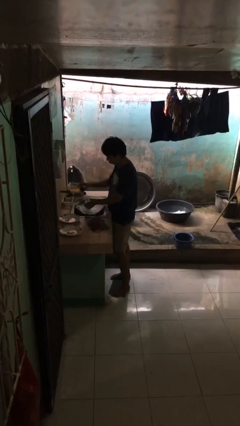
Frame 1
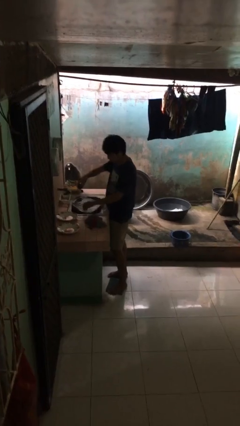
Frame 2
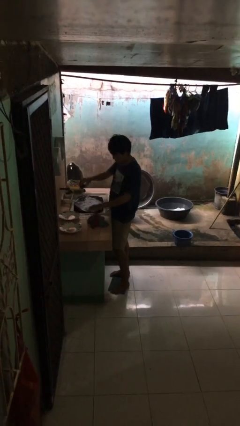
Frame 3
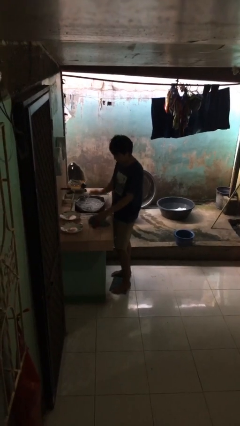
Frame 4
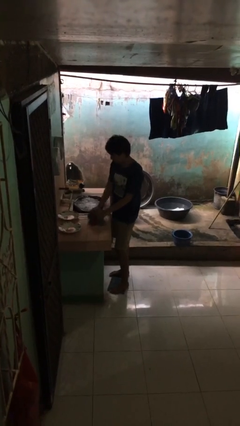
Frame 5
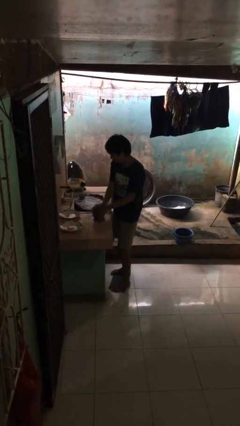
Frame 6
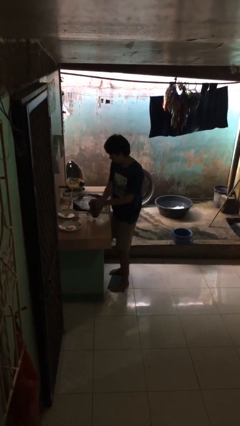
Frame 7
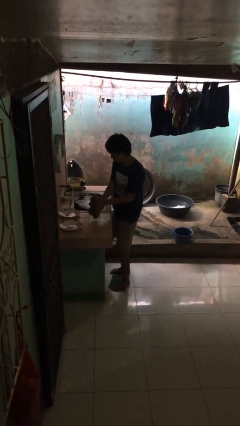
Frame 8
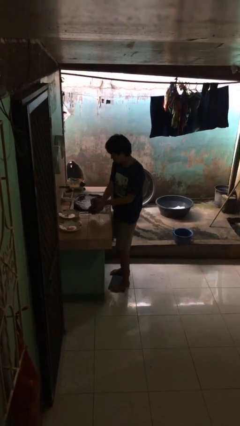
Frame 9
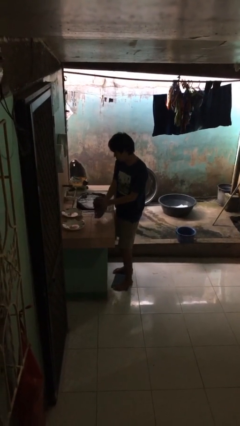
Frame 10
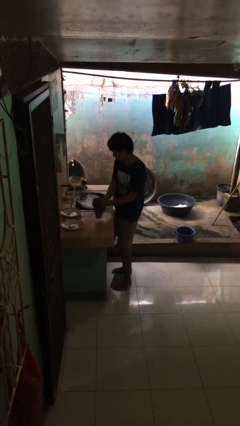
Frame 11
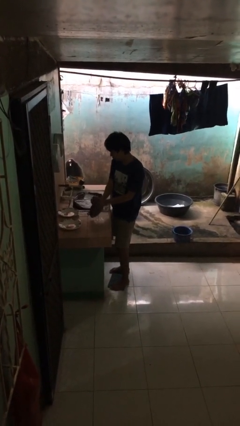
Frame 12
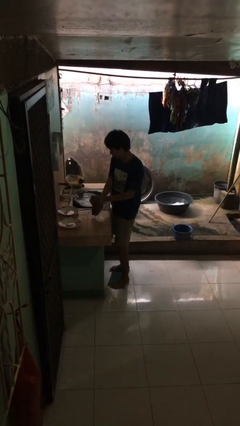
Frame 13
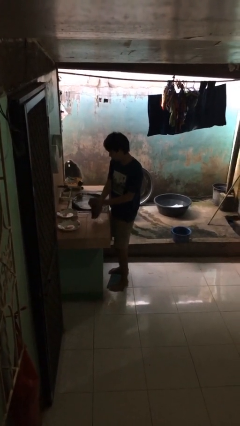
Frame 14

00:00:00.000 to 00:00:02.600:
person dries hands with towel

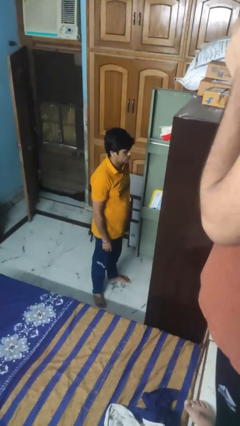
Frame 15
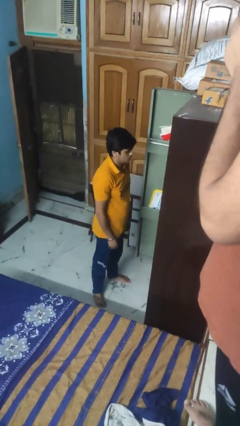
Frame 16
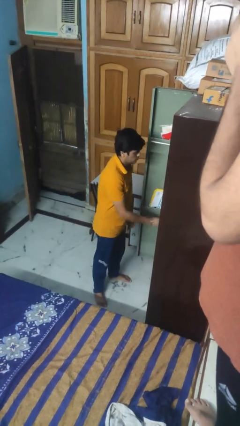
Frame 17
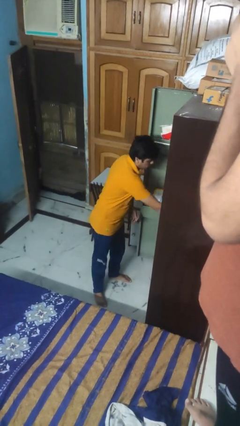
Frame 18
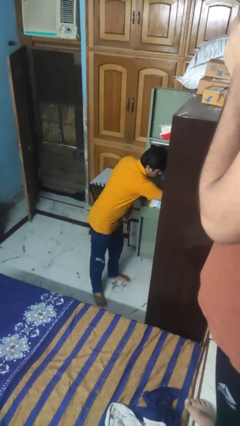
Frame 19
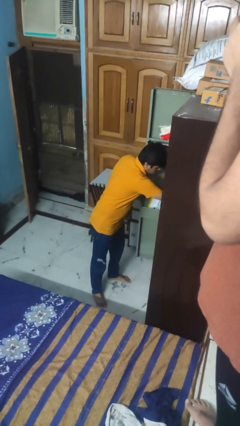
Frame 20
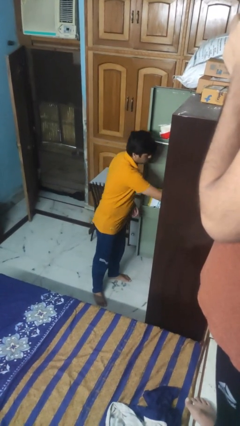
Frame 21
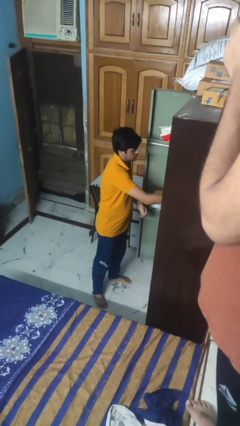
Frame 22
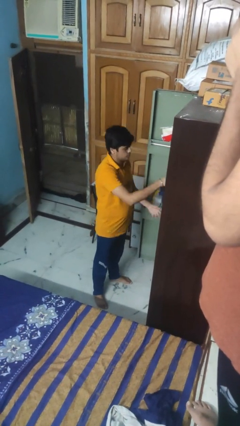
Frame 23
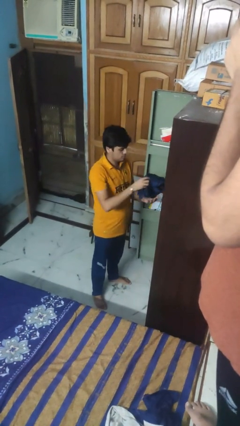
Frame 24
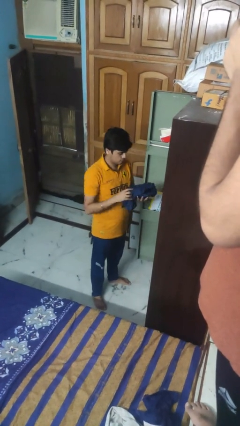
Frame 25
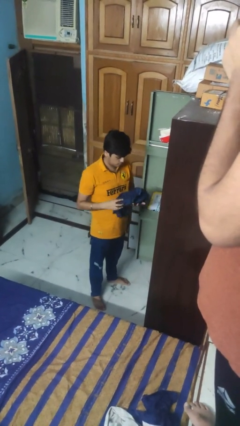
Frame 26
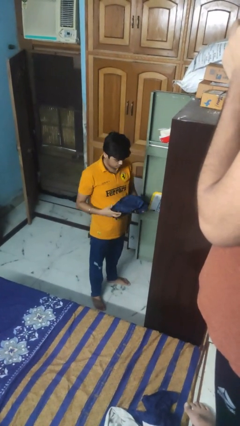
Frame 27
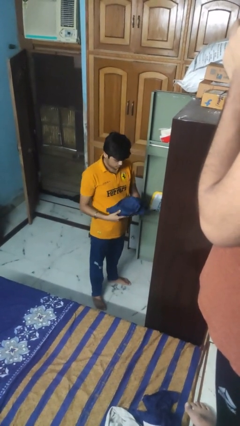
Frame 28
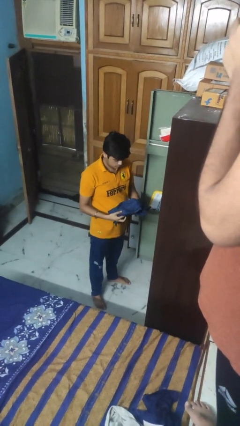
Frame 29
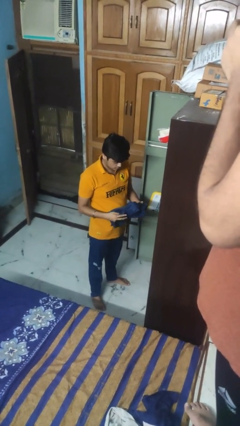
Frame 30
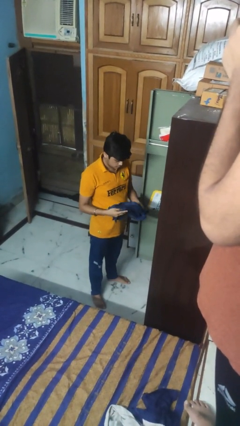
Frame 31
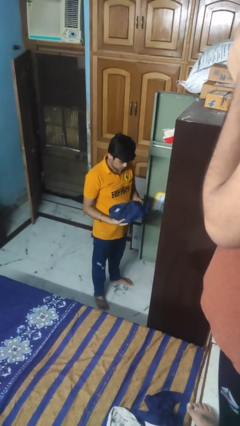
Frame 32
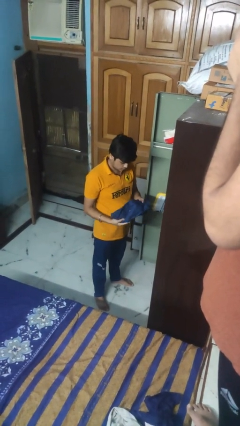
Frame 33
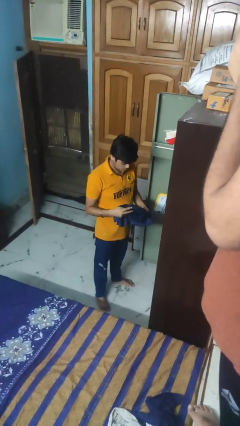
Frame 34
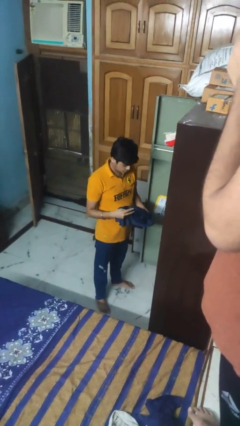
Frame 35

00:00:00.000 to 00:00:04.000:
person takes clothes from dresser

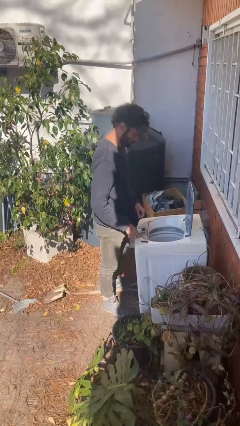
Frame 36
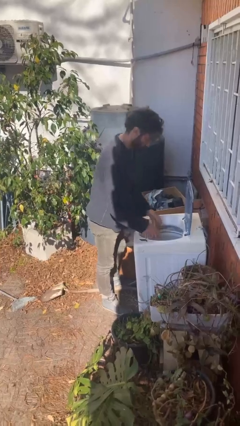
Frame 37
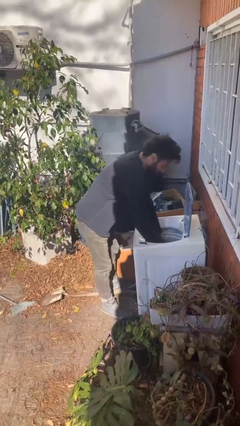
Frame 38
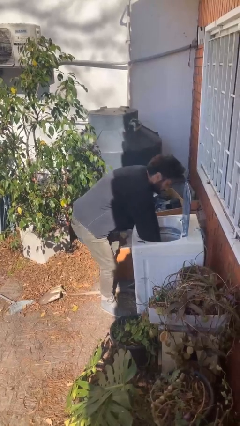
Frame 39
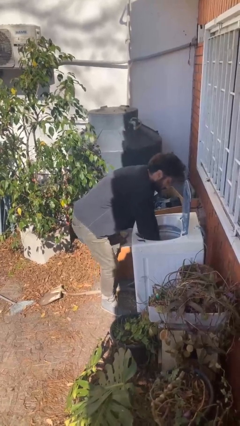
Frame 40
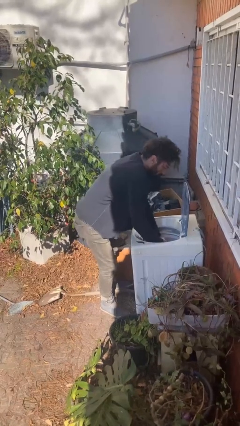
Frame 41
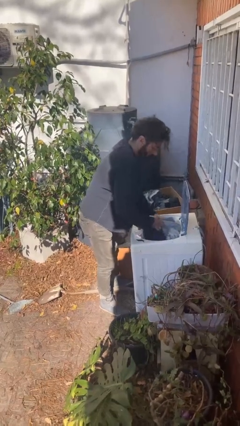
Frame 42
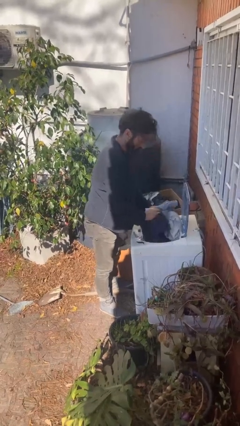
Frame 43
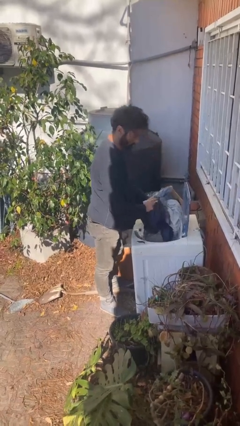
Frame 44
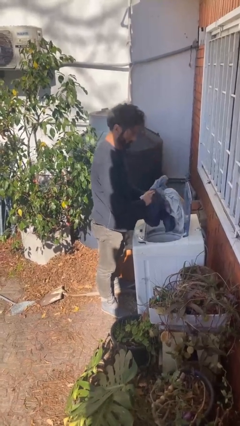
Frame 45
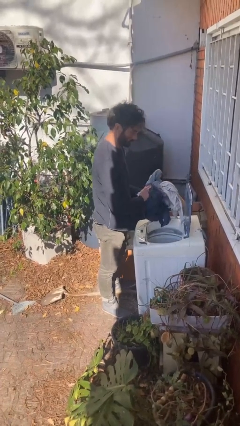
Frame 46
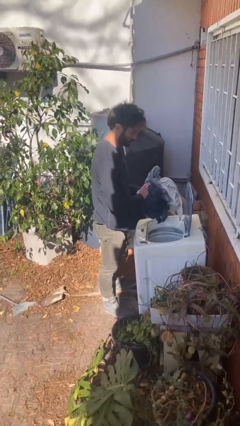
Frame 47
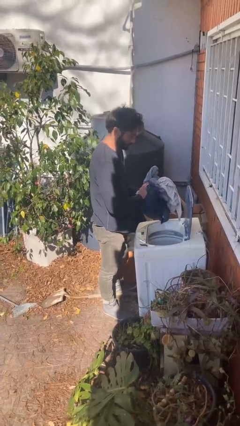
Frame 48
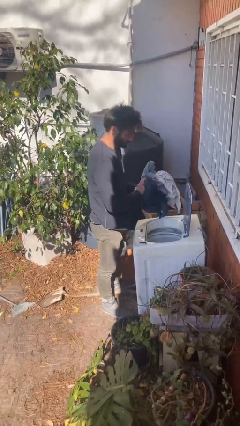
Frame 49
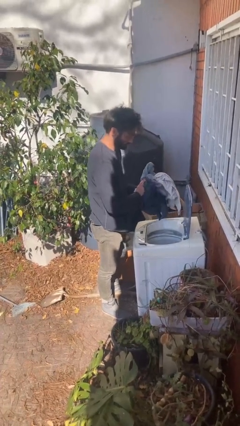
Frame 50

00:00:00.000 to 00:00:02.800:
person loads clotheswasher

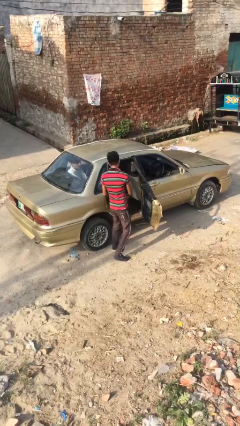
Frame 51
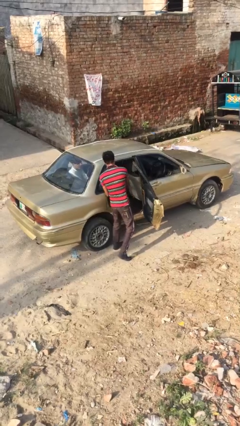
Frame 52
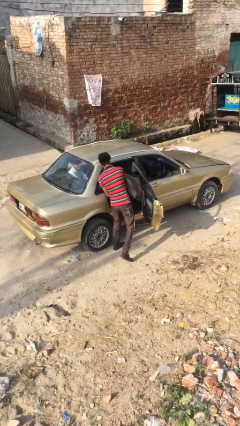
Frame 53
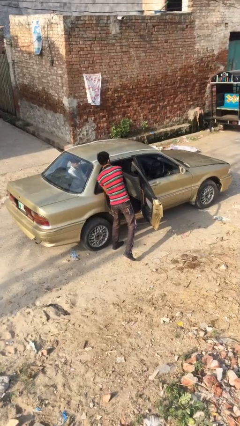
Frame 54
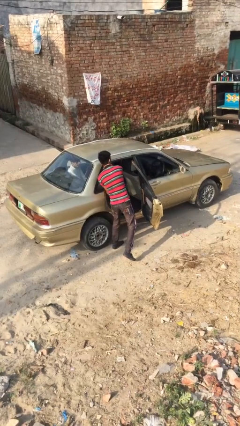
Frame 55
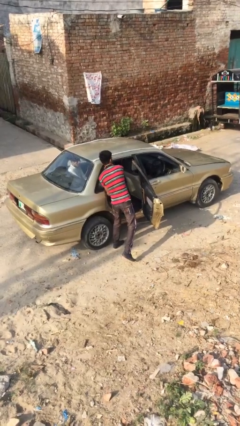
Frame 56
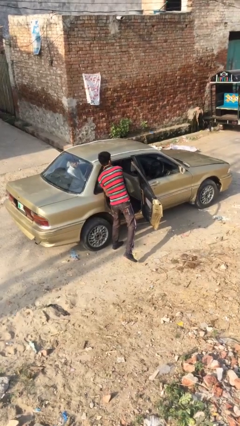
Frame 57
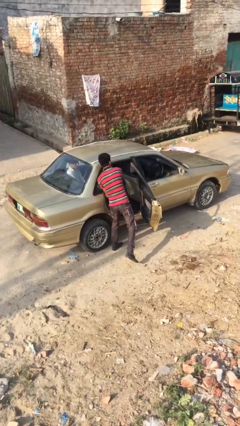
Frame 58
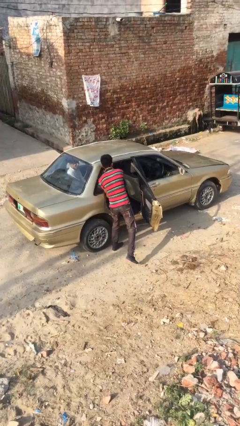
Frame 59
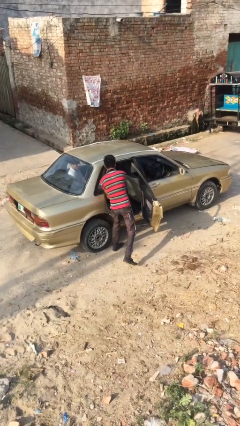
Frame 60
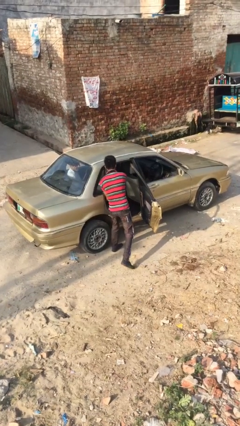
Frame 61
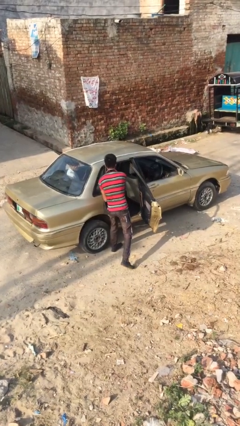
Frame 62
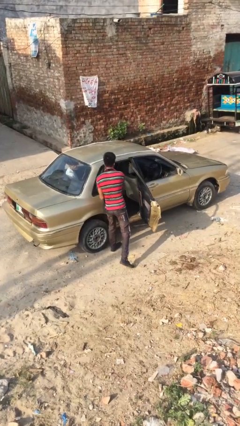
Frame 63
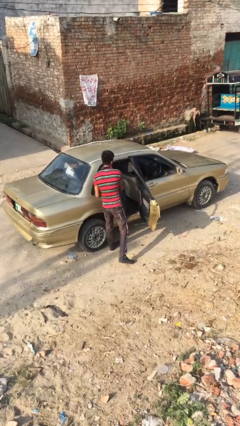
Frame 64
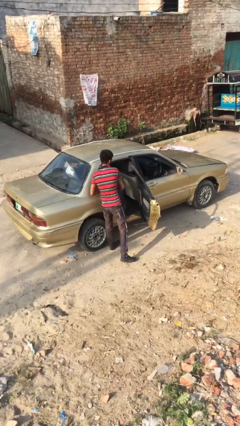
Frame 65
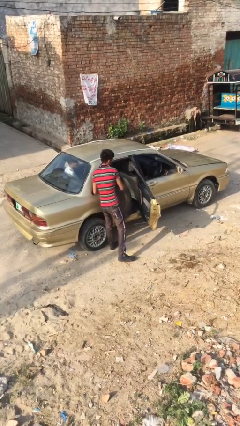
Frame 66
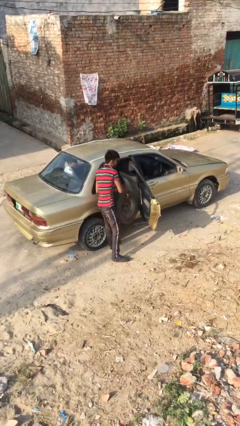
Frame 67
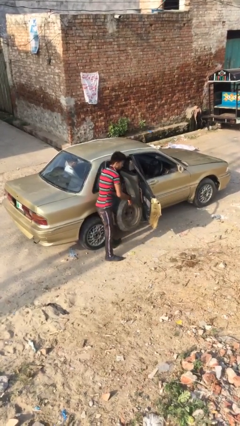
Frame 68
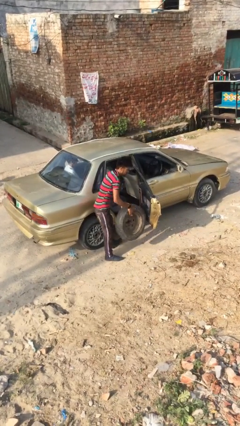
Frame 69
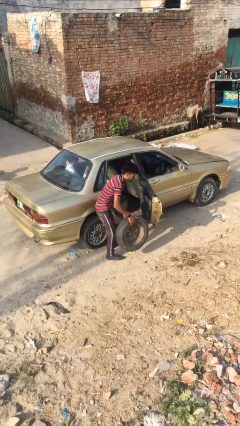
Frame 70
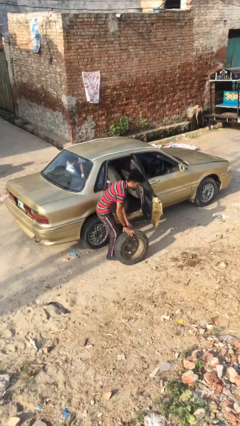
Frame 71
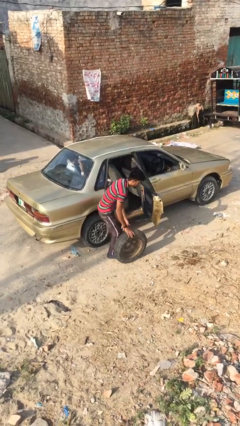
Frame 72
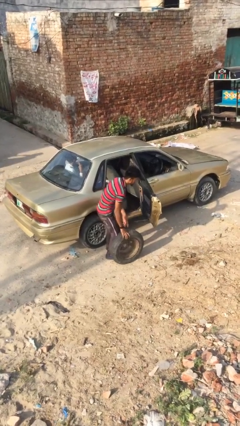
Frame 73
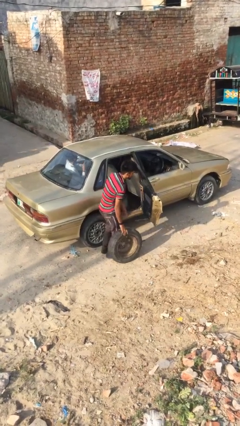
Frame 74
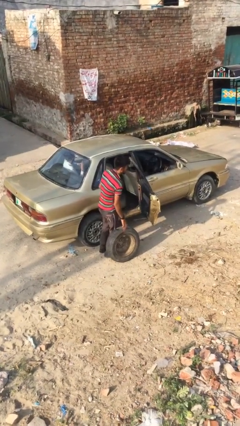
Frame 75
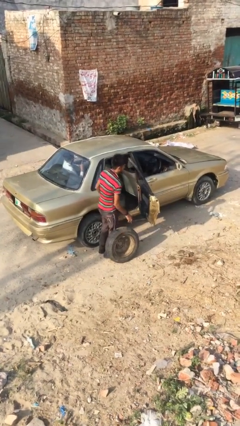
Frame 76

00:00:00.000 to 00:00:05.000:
person unloads car

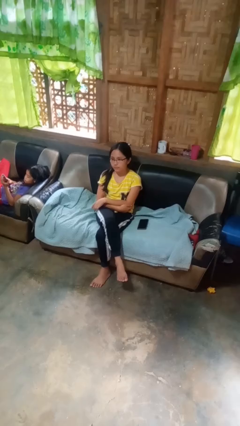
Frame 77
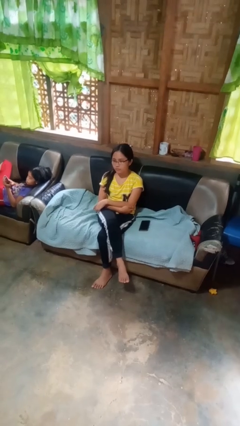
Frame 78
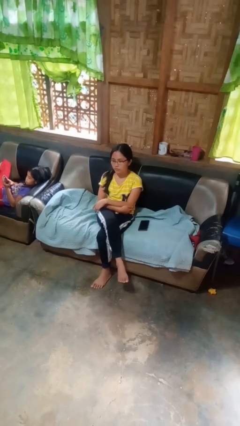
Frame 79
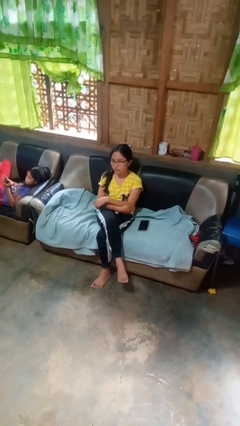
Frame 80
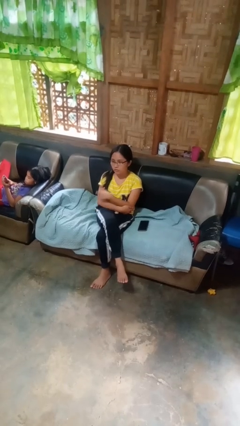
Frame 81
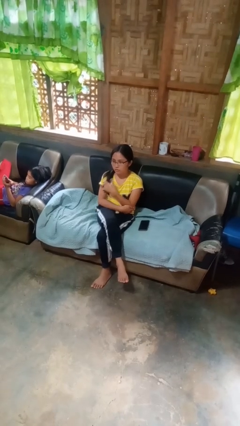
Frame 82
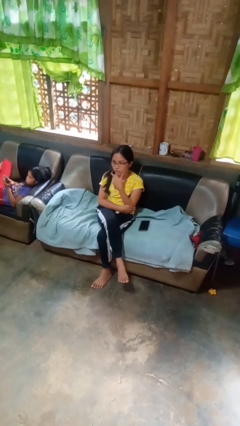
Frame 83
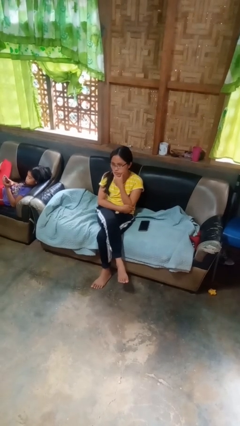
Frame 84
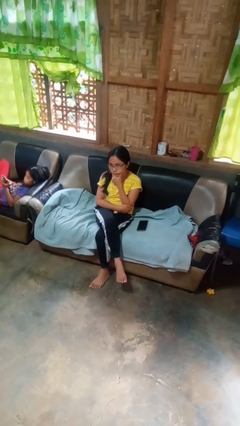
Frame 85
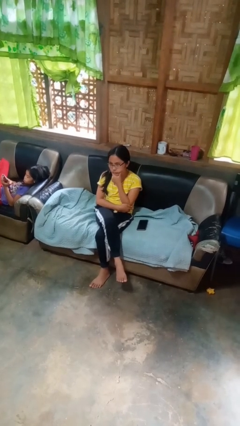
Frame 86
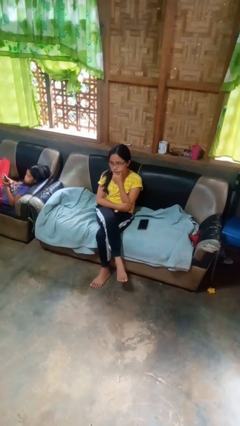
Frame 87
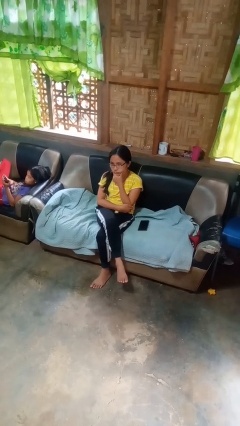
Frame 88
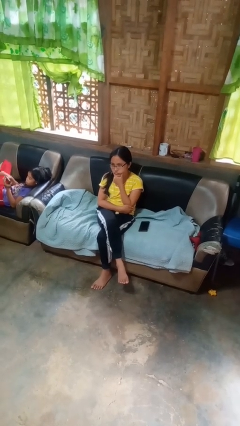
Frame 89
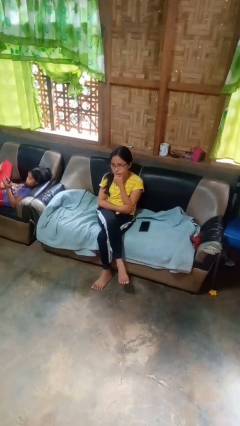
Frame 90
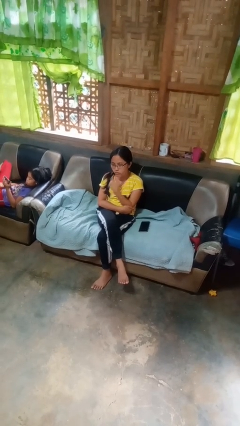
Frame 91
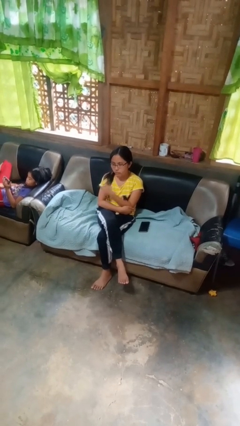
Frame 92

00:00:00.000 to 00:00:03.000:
person strokes chin

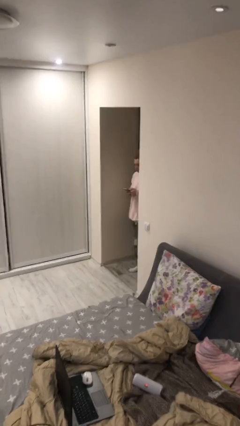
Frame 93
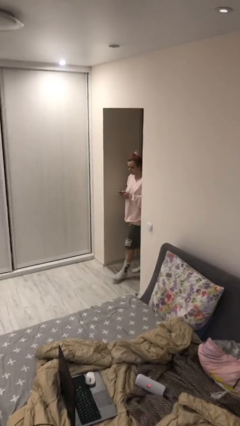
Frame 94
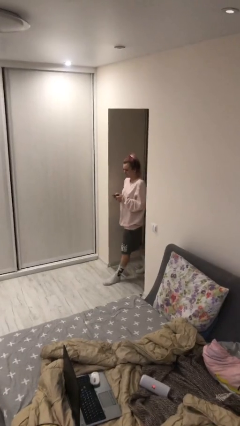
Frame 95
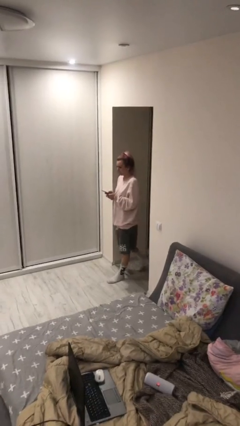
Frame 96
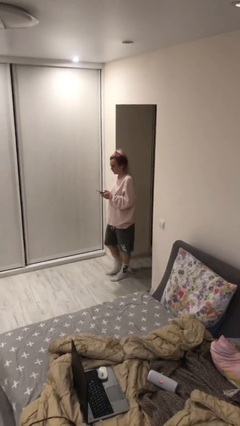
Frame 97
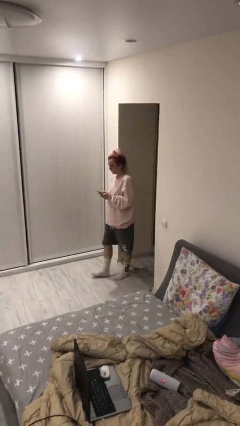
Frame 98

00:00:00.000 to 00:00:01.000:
person enters scene through structure
